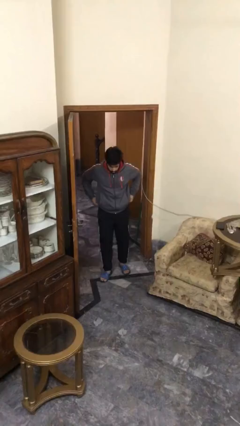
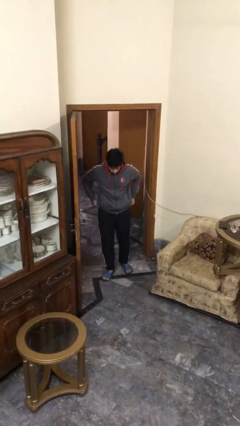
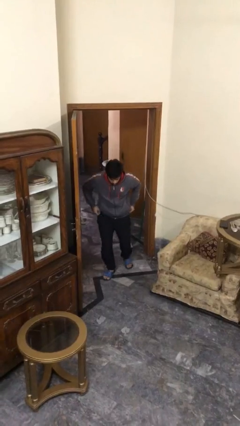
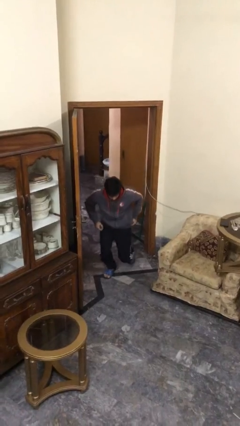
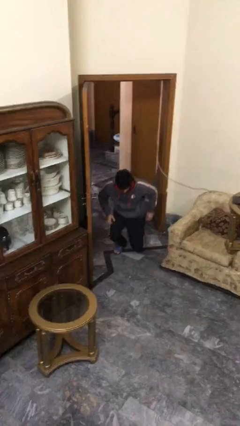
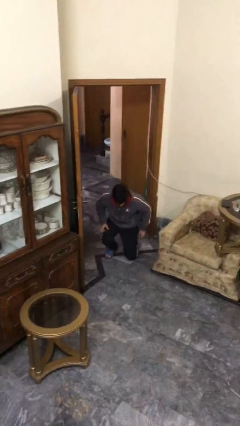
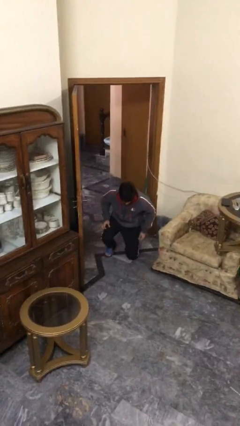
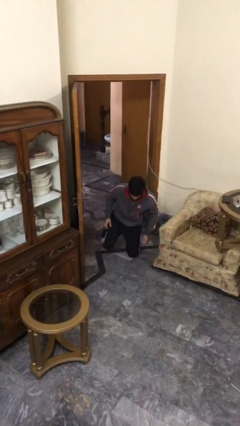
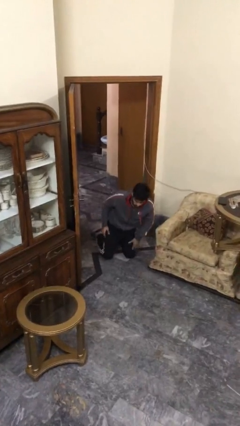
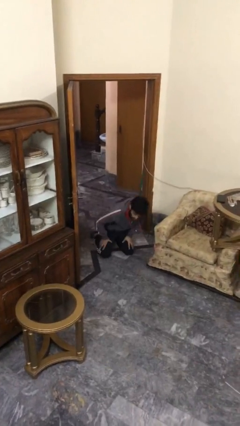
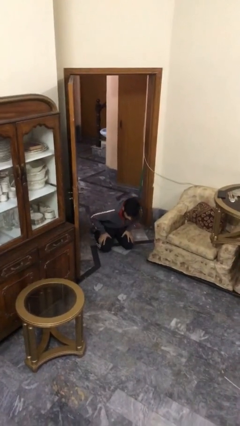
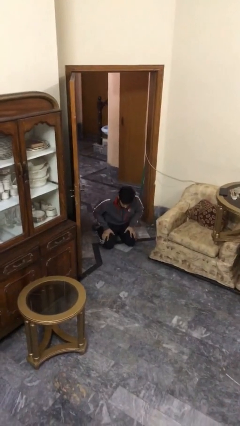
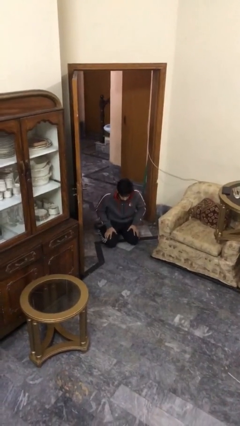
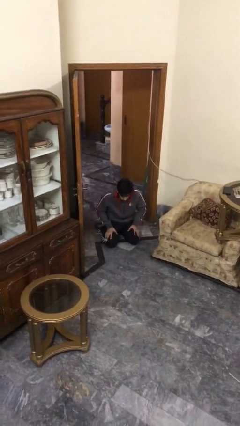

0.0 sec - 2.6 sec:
person sits down

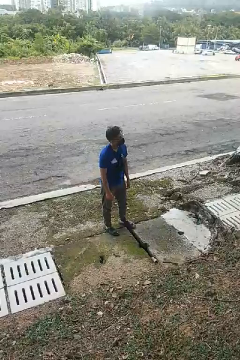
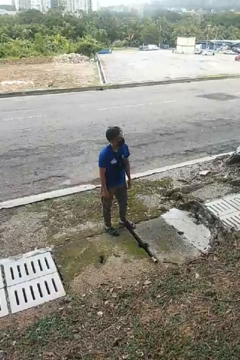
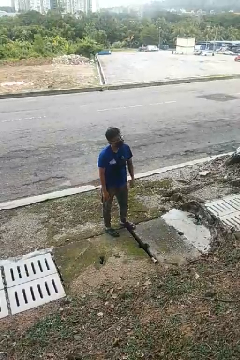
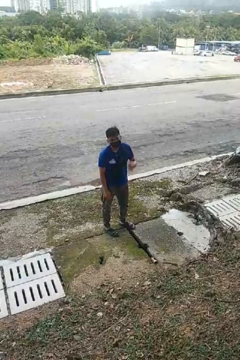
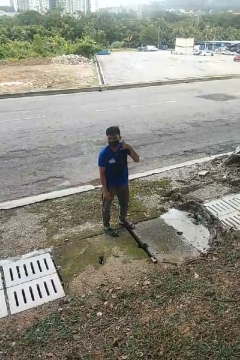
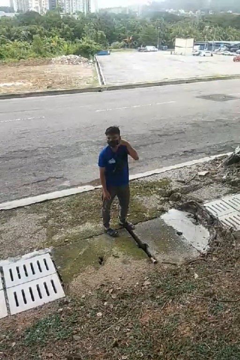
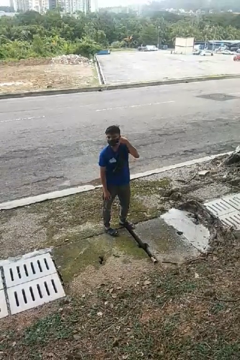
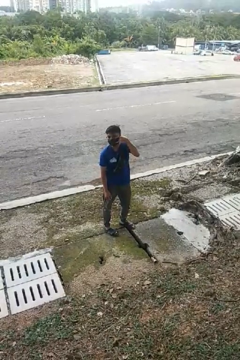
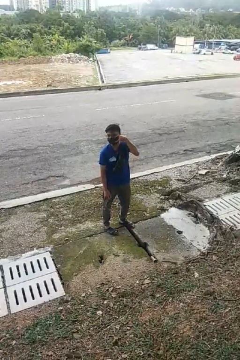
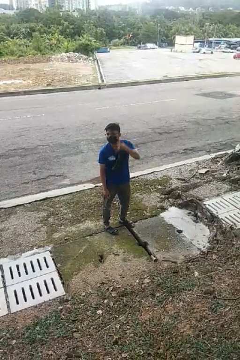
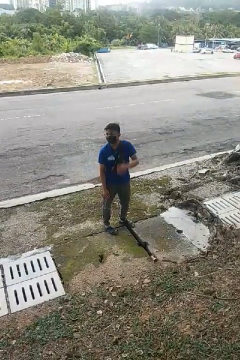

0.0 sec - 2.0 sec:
person gestures call me

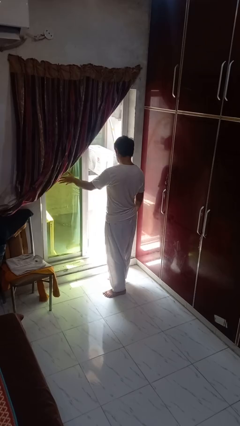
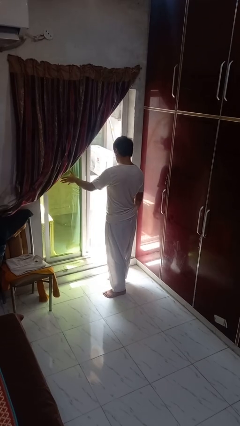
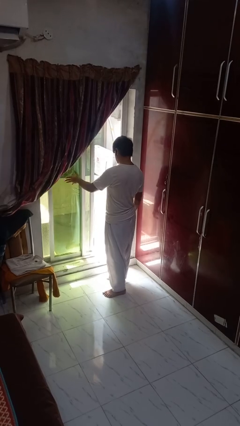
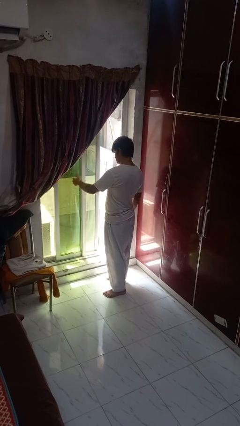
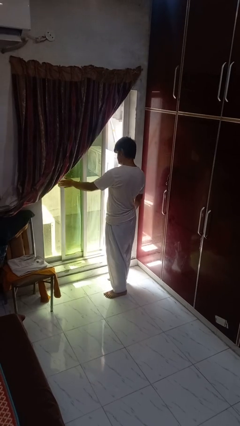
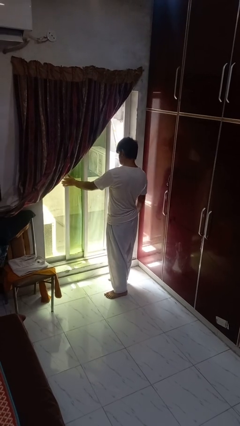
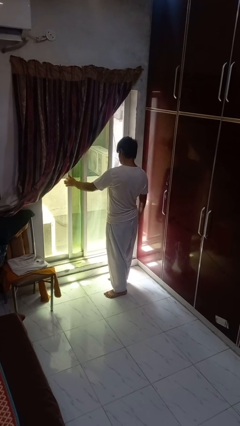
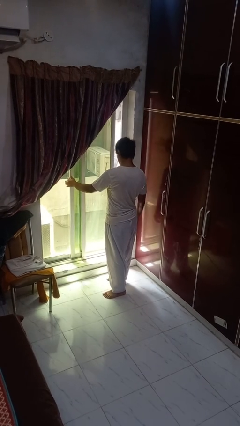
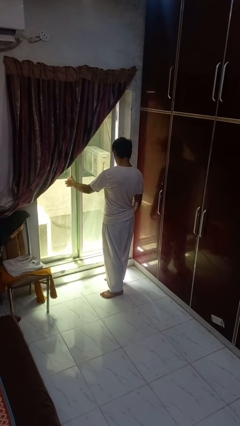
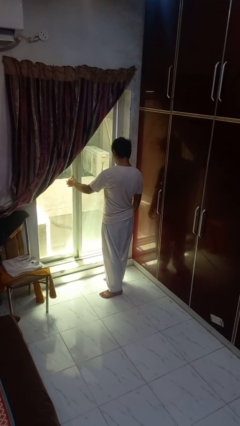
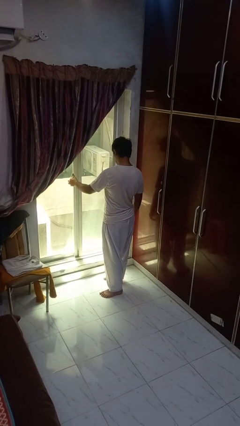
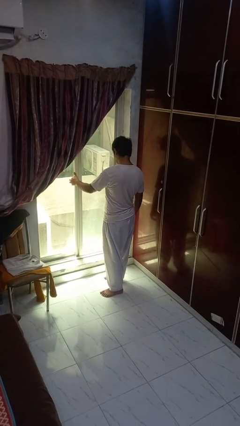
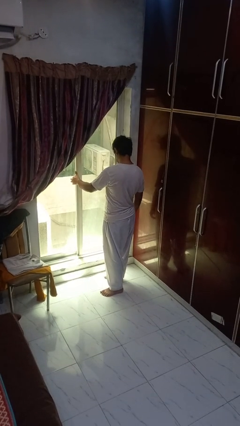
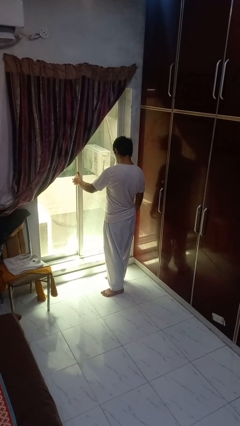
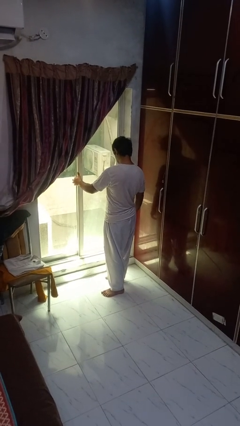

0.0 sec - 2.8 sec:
person closes home window

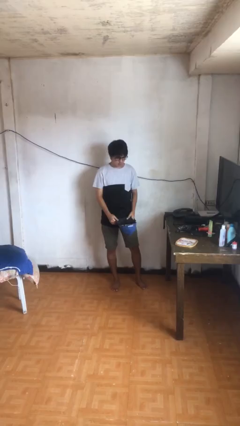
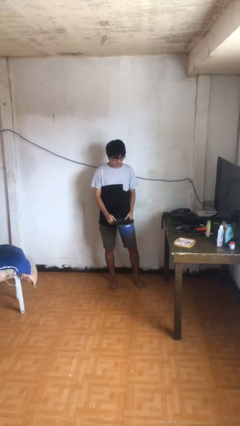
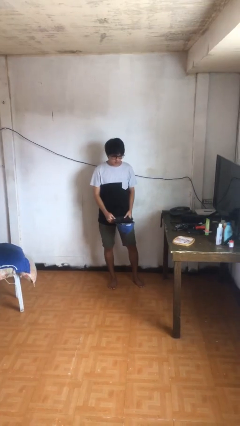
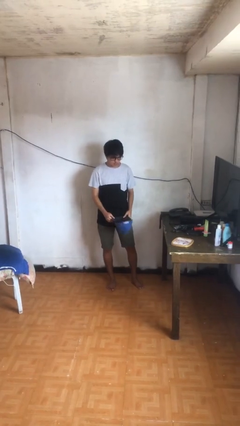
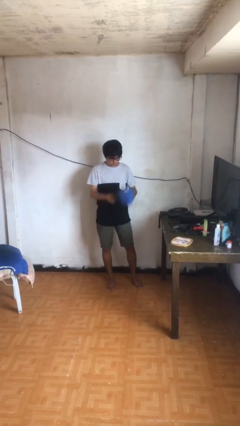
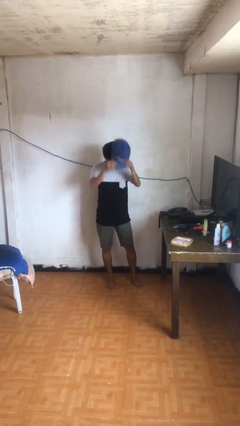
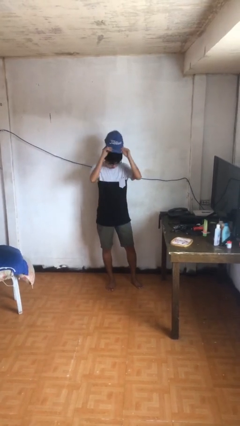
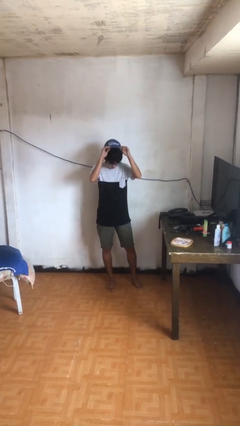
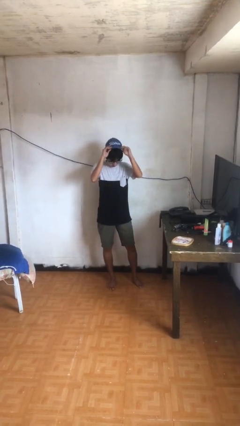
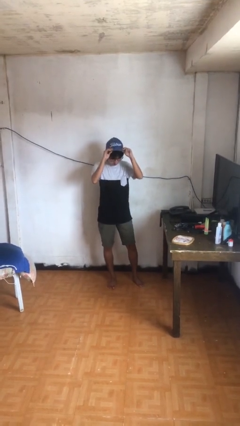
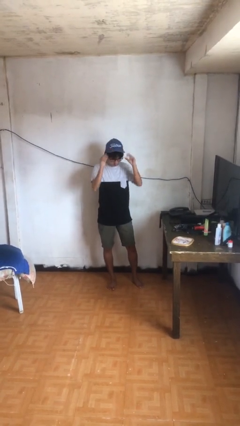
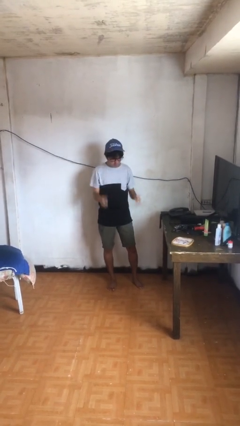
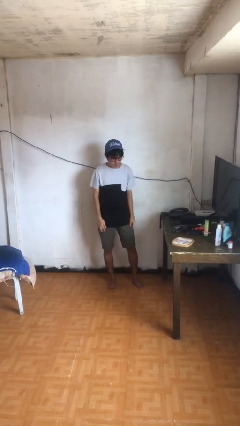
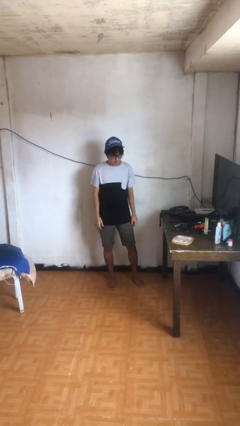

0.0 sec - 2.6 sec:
person puts on hat

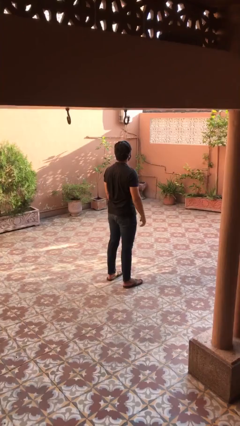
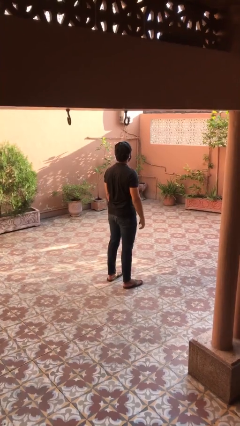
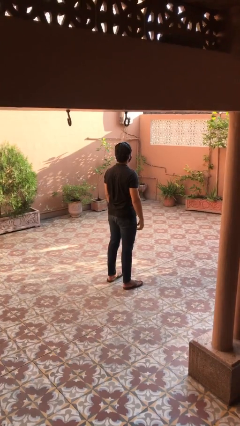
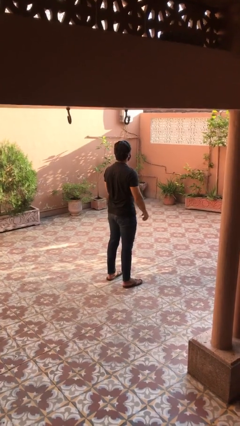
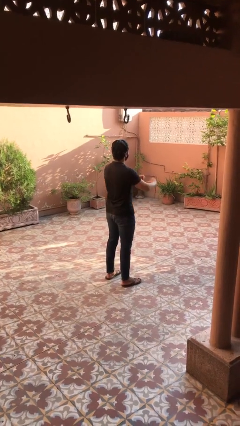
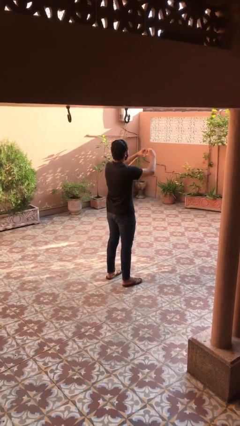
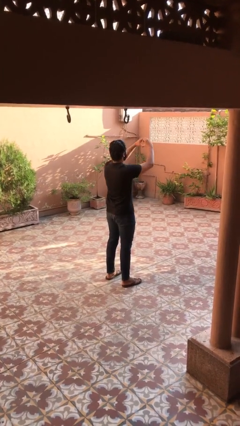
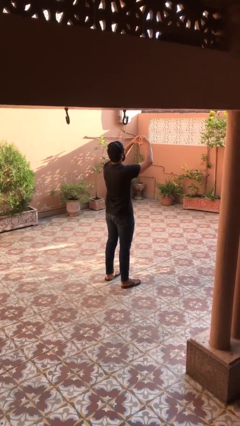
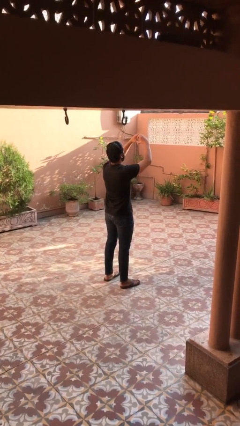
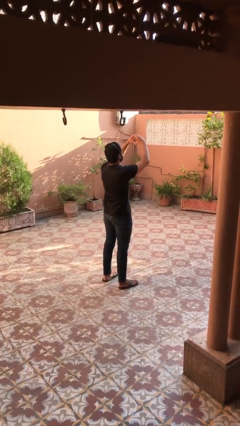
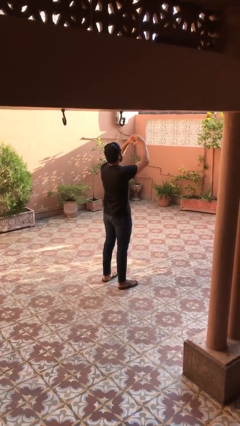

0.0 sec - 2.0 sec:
person gestures heart

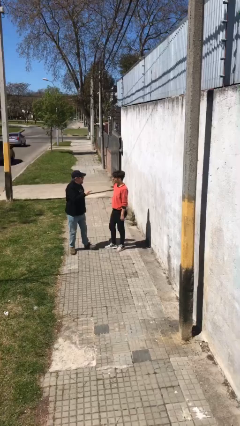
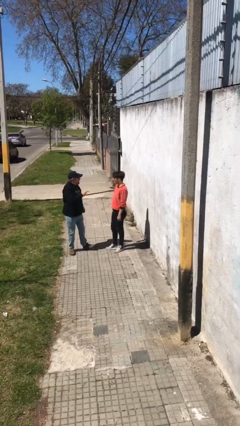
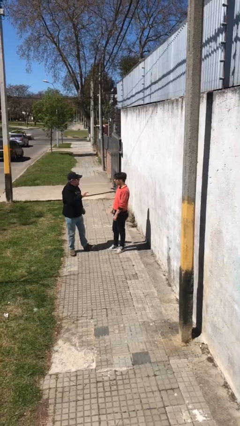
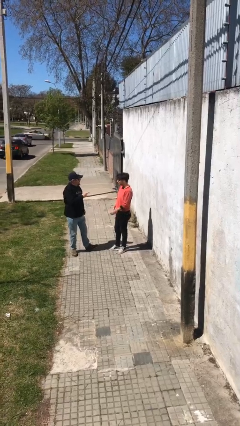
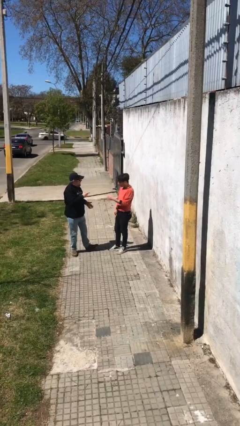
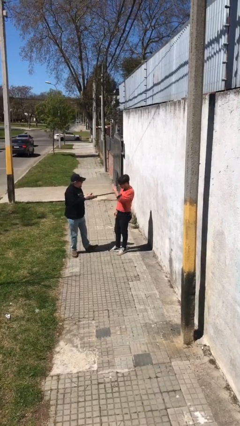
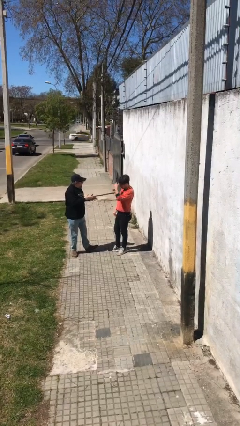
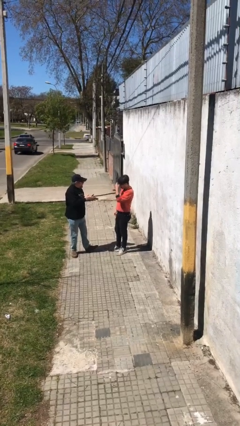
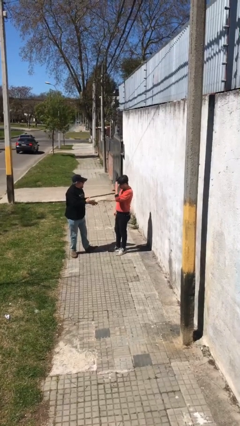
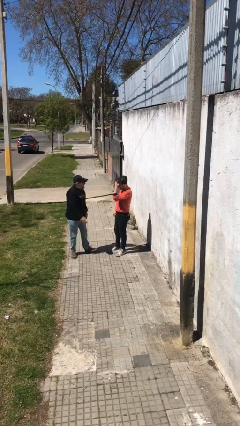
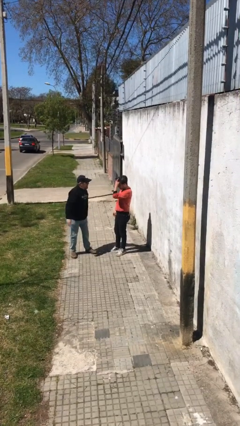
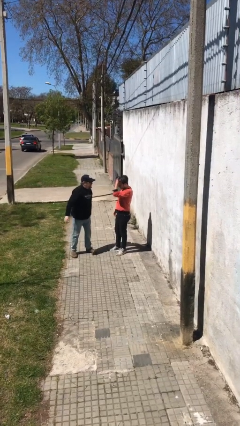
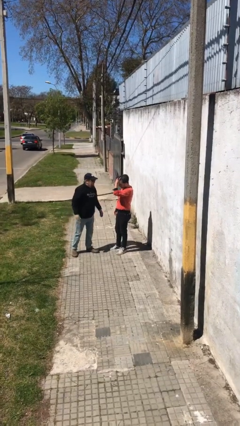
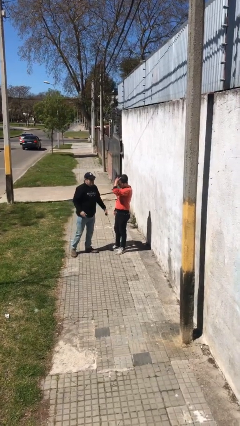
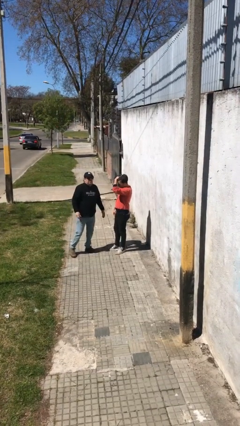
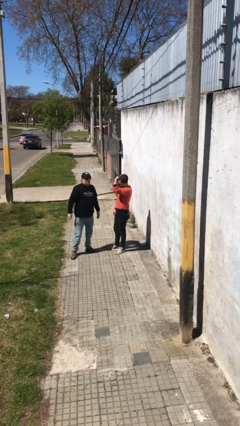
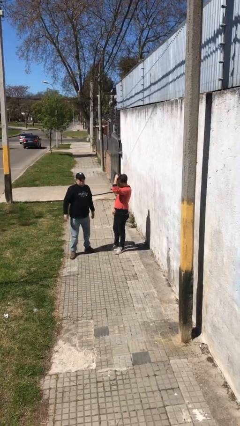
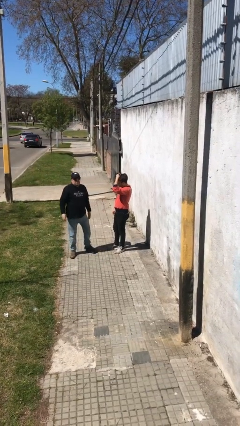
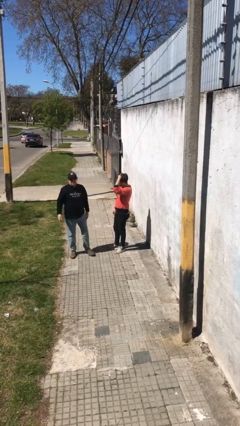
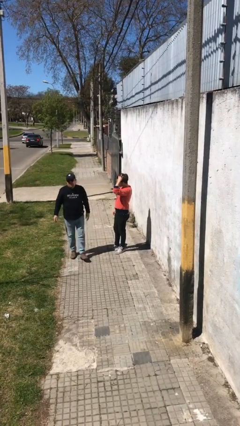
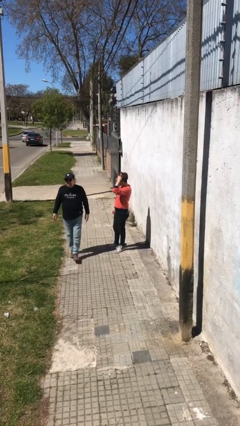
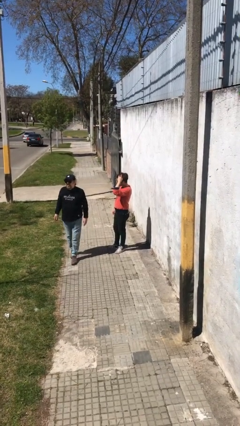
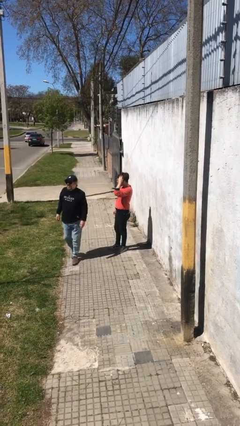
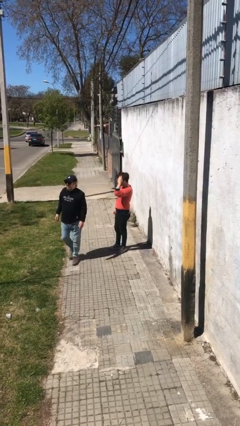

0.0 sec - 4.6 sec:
person talks to person

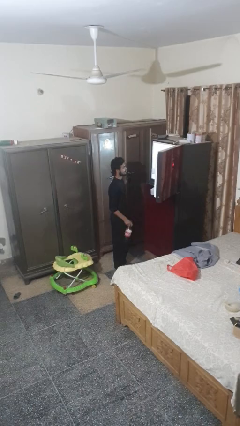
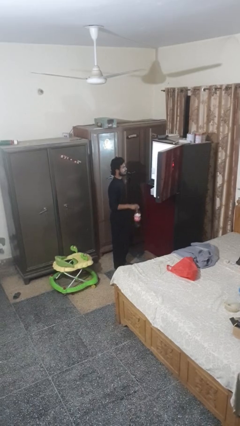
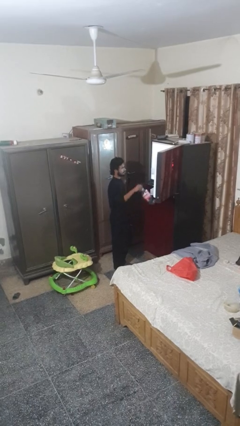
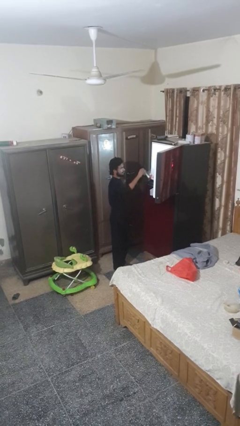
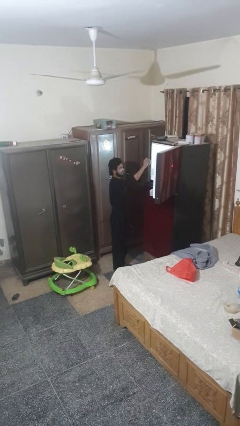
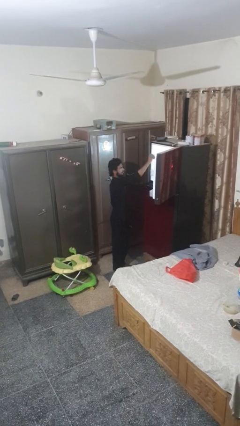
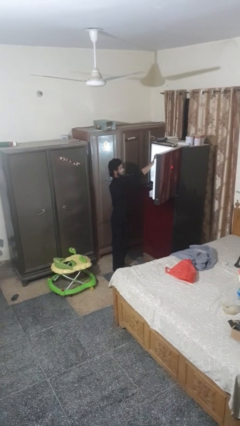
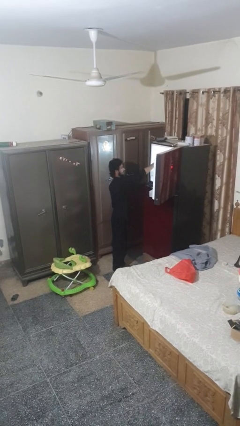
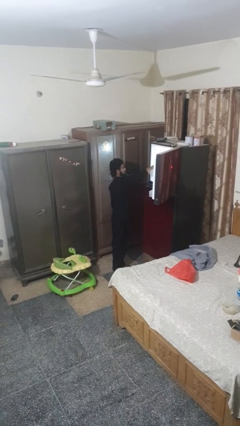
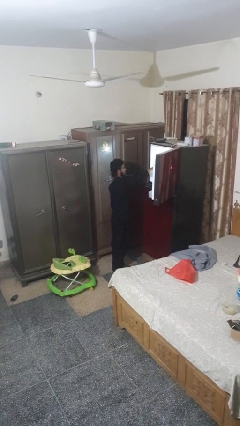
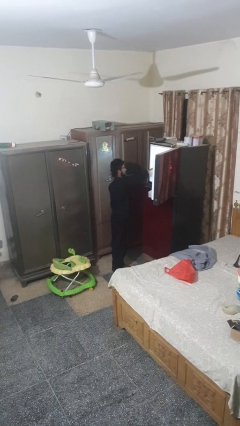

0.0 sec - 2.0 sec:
person puts object into refrigerator
